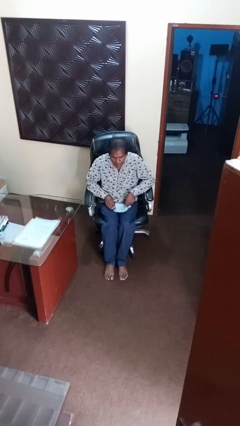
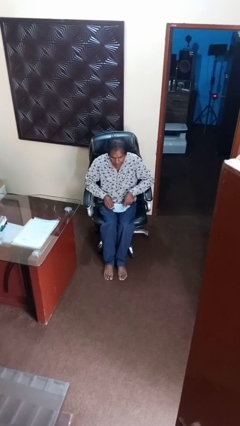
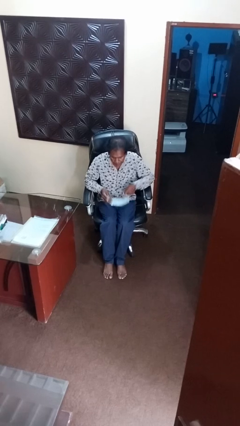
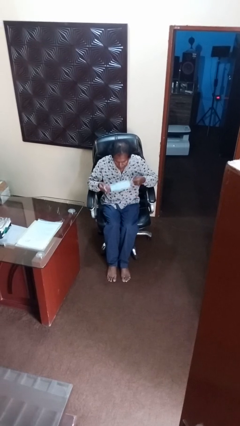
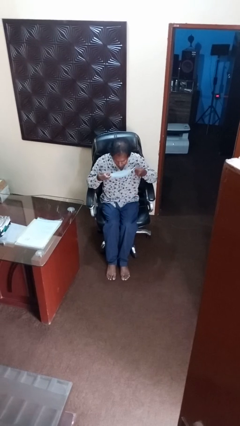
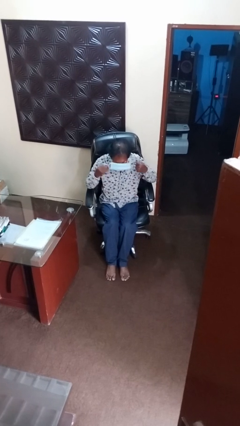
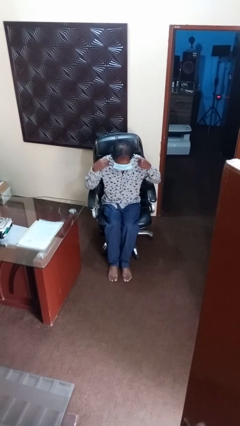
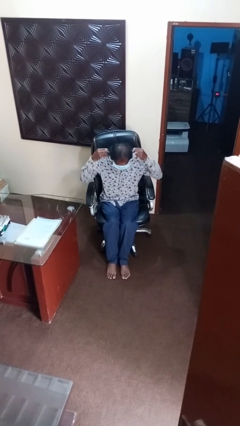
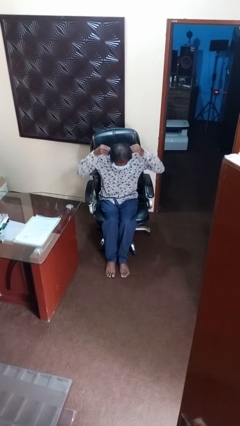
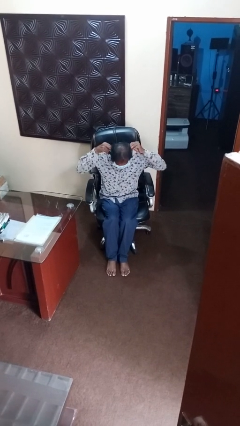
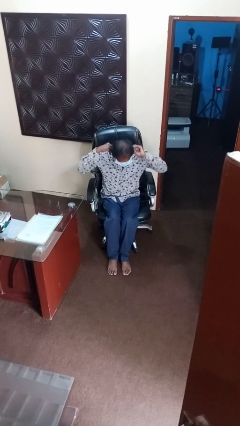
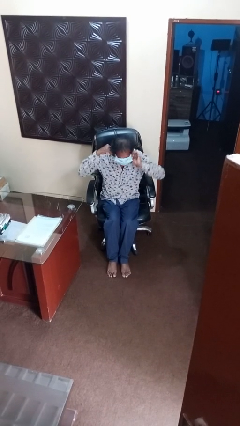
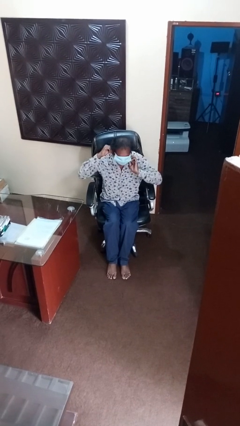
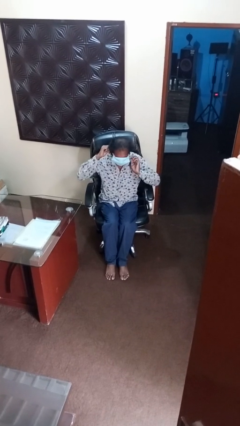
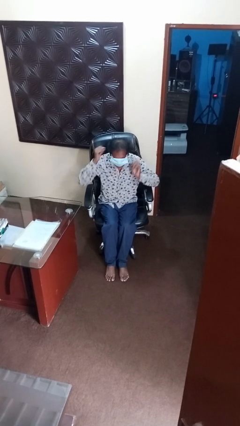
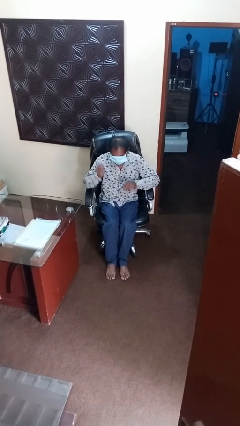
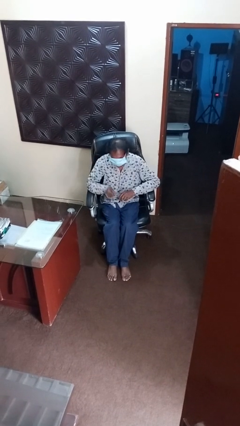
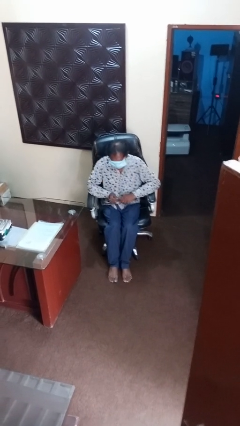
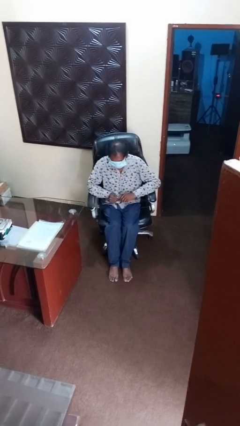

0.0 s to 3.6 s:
person puts on facemask

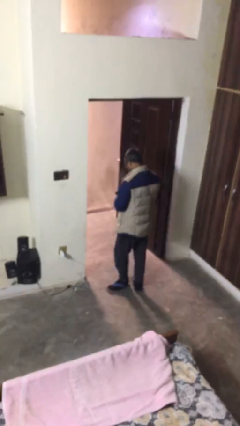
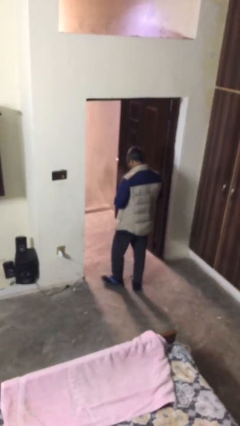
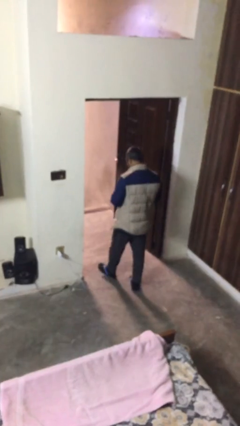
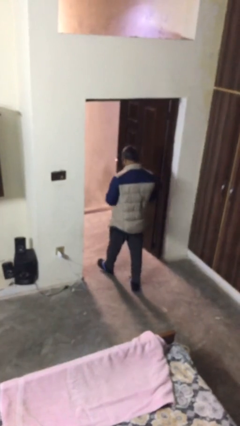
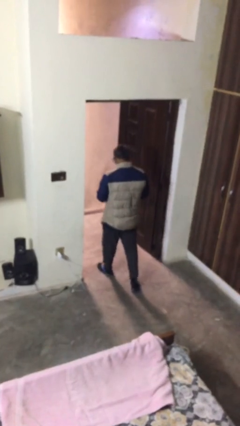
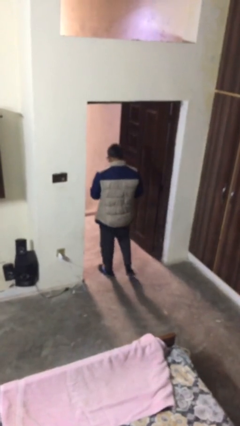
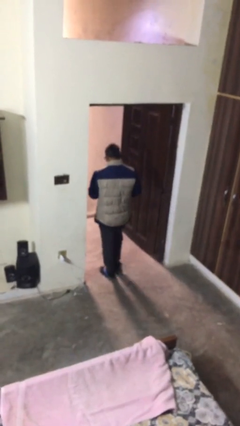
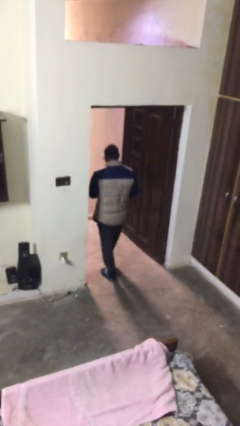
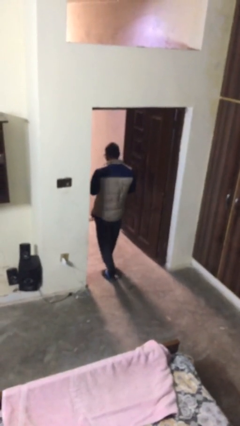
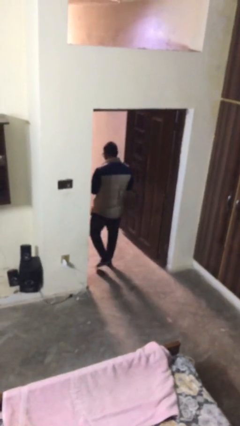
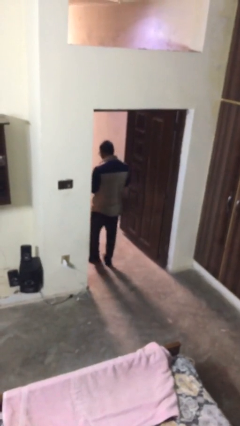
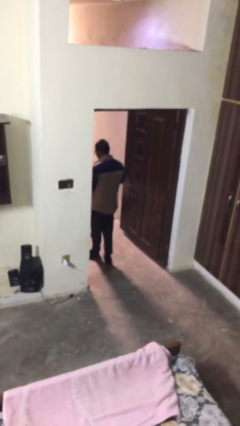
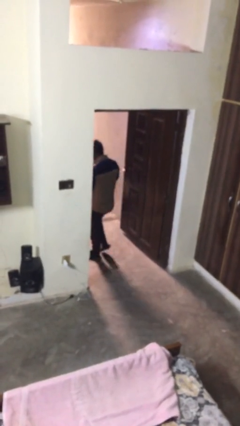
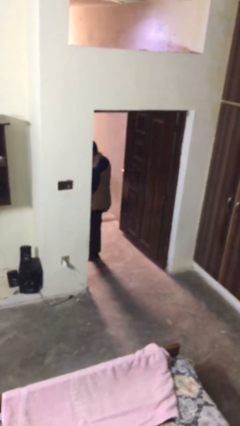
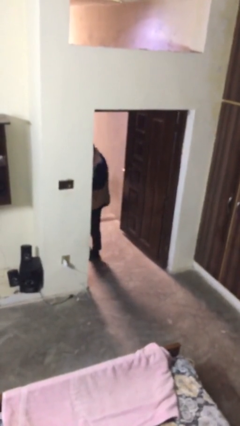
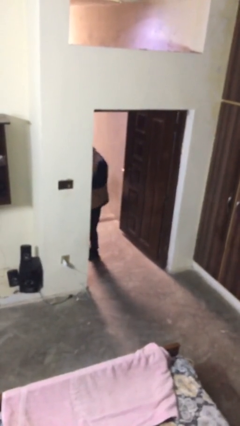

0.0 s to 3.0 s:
person exits scene through structure

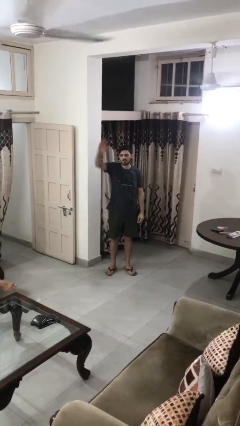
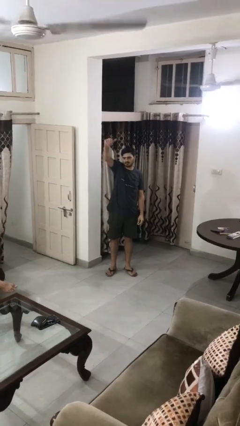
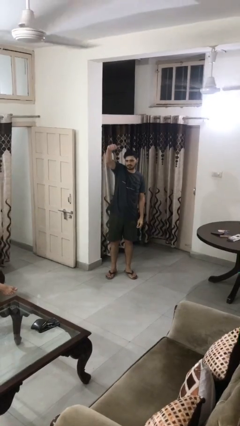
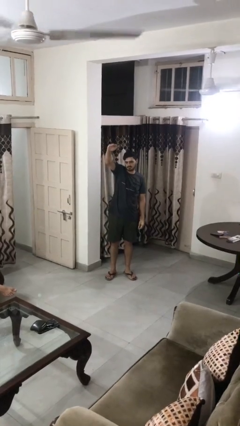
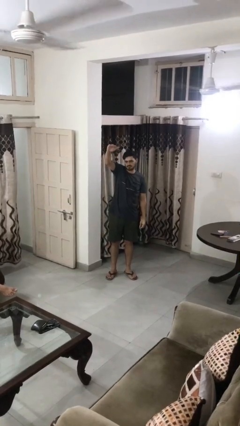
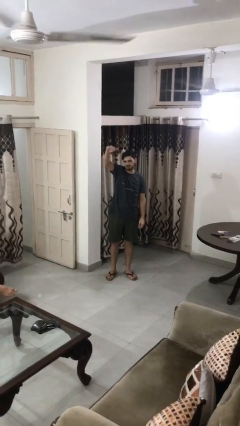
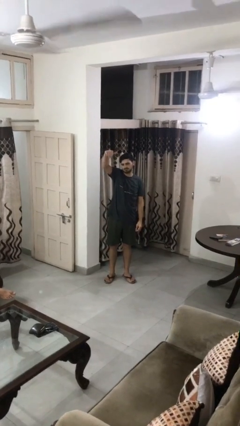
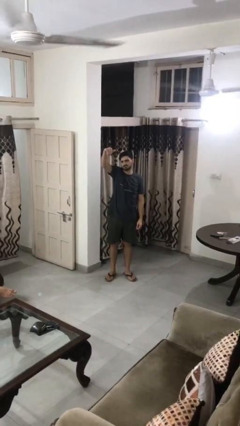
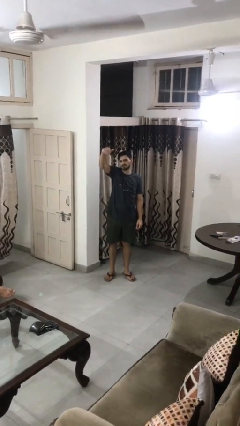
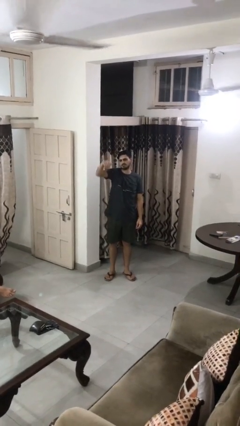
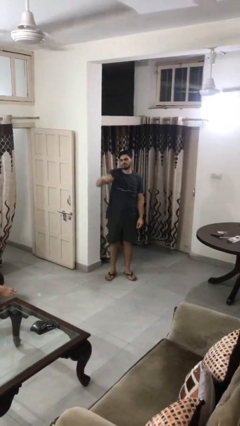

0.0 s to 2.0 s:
person gestures come here

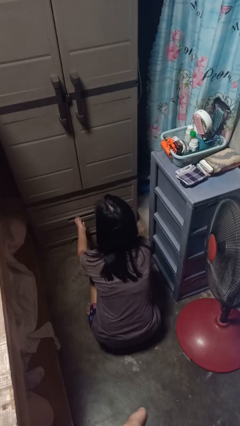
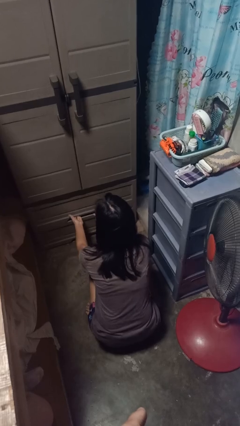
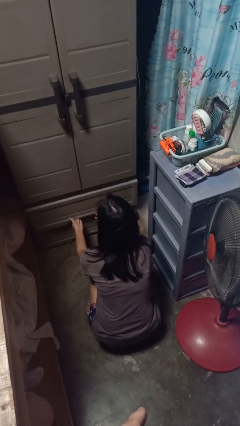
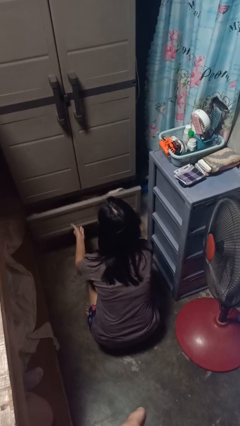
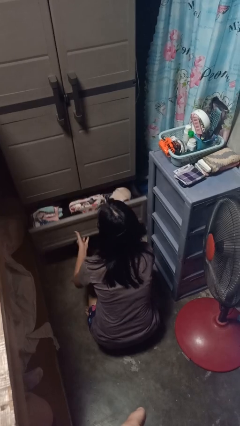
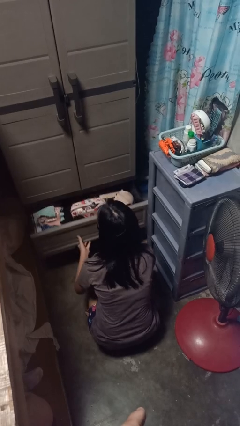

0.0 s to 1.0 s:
person opens dresser drawer

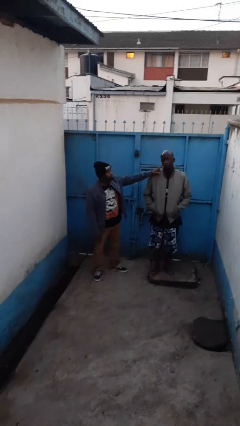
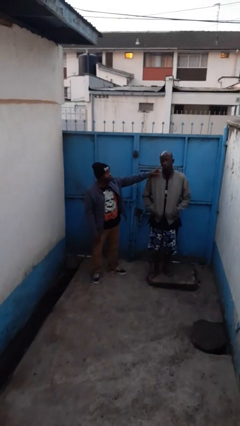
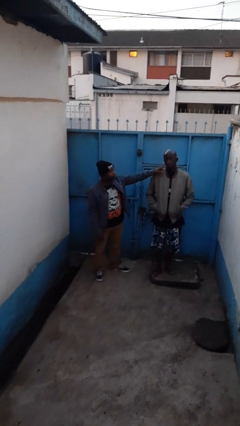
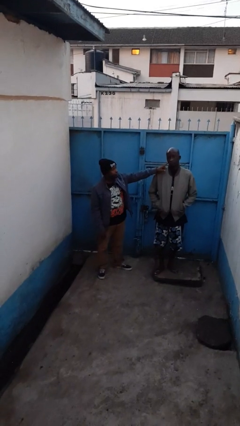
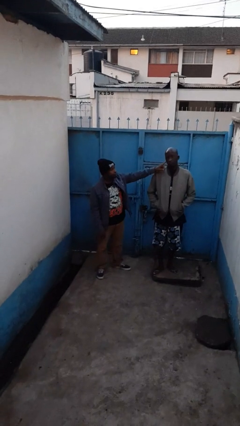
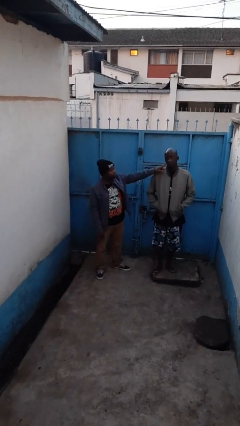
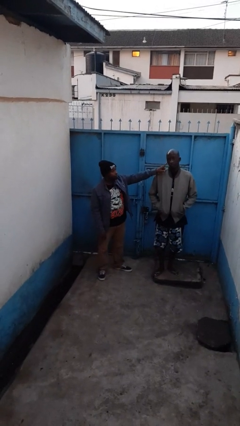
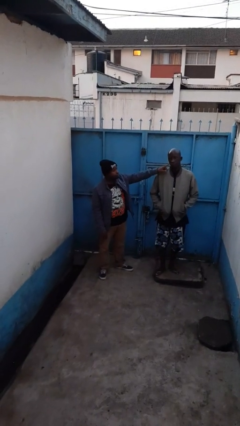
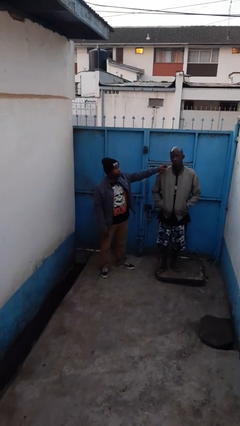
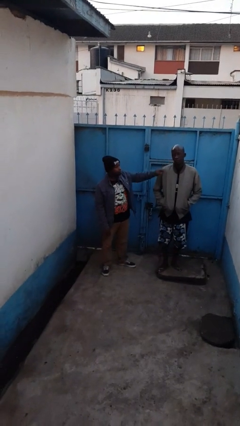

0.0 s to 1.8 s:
person touches face of person

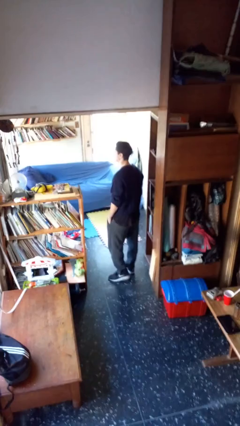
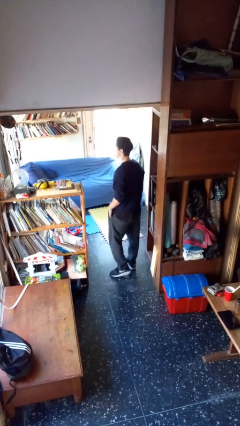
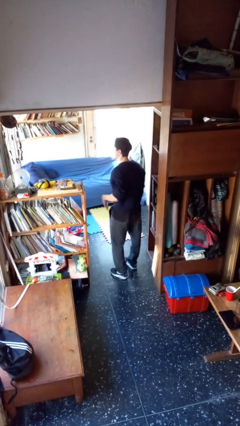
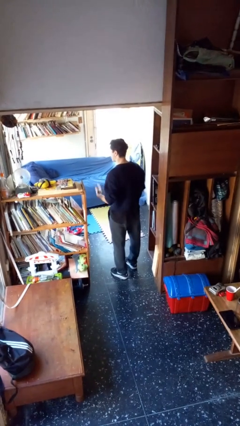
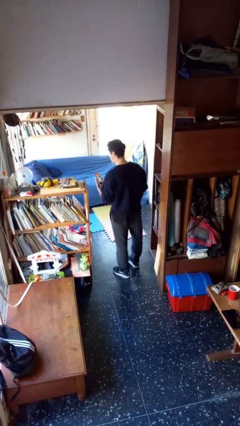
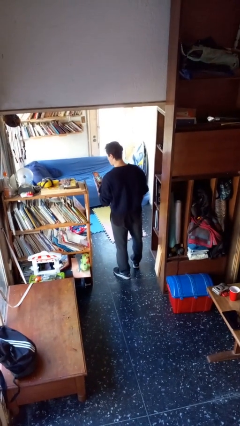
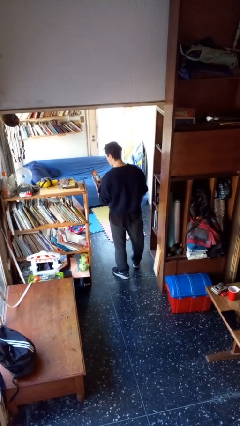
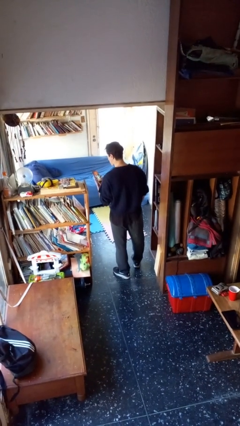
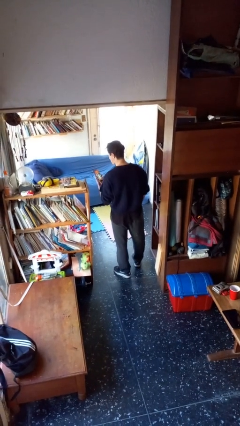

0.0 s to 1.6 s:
person takes phone from pocket

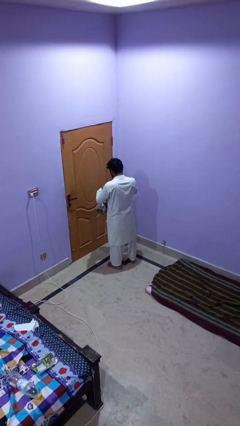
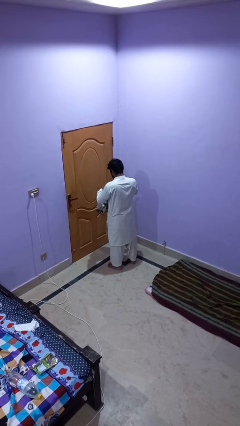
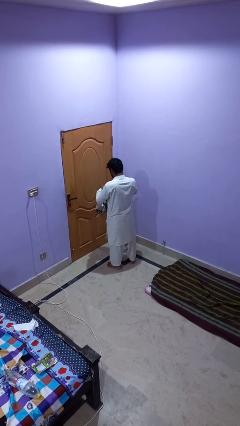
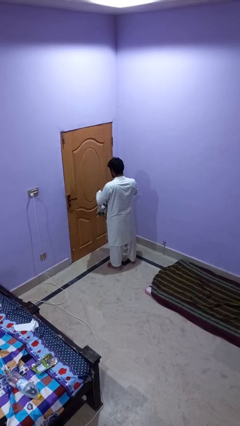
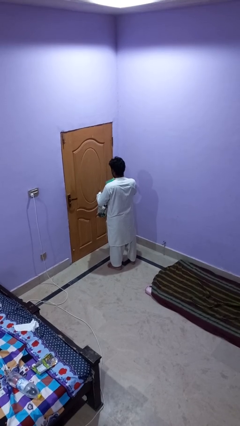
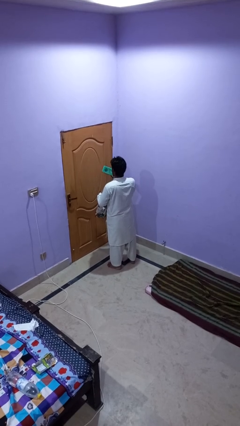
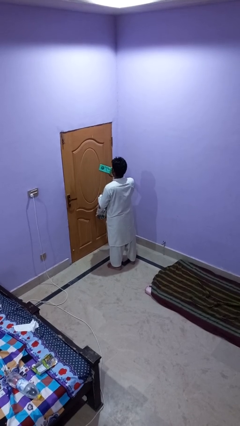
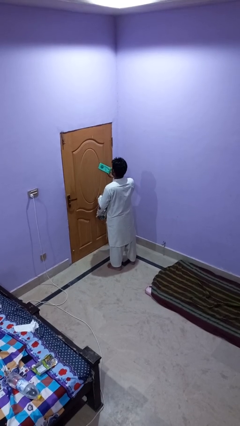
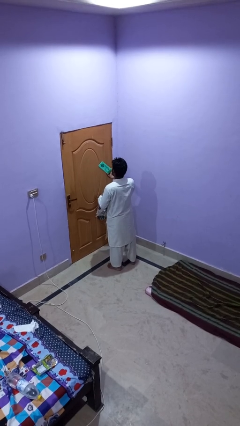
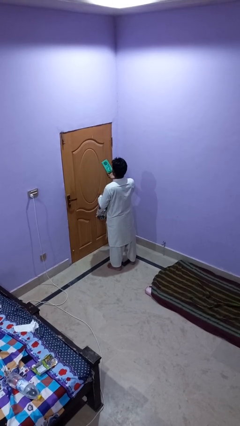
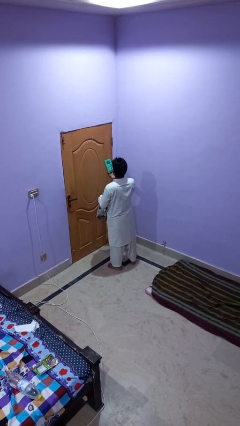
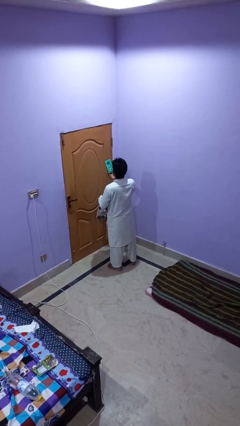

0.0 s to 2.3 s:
person takes object from backpack

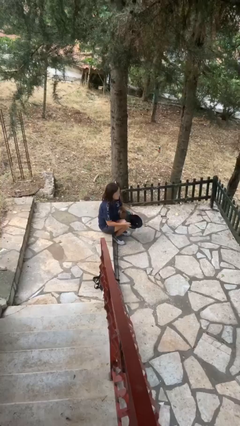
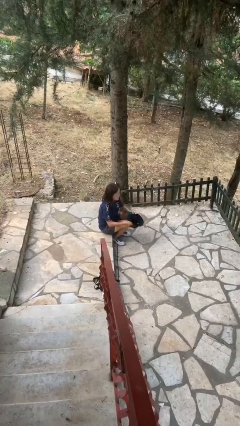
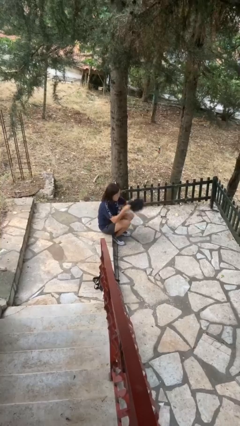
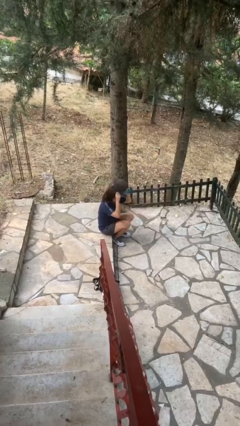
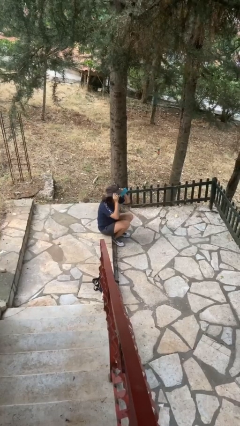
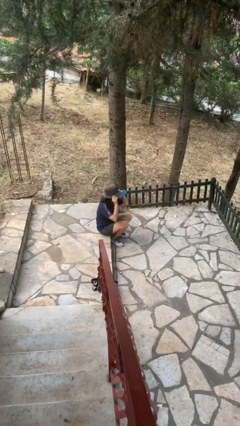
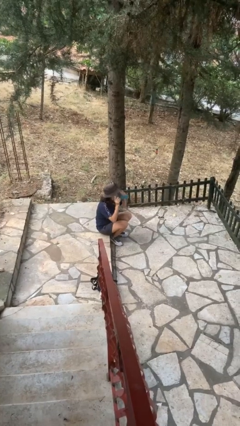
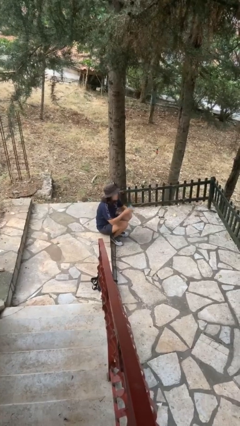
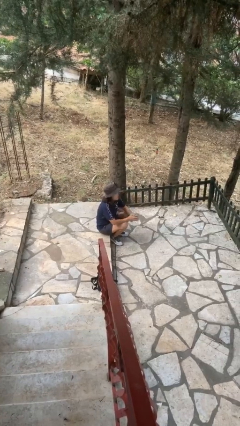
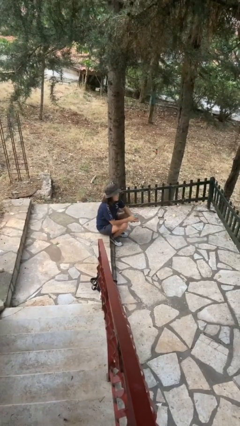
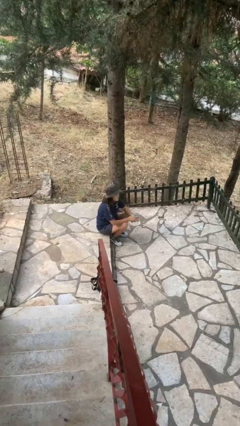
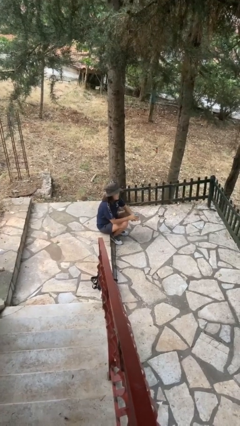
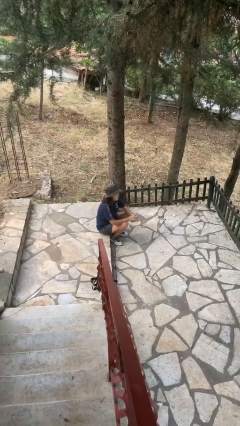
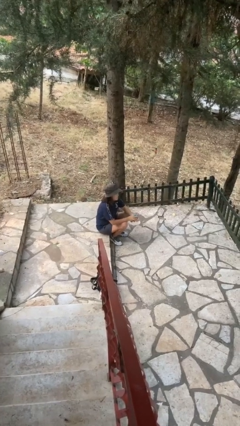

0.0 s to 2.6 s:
person puts on hat
